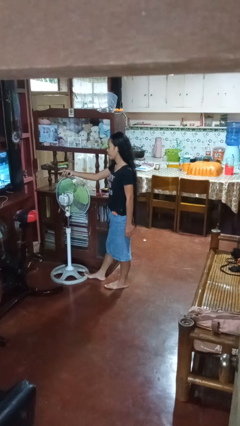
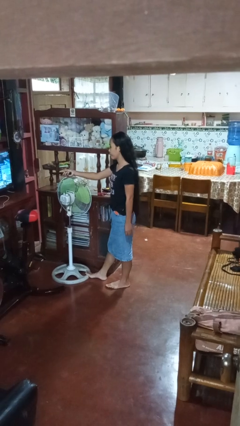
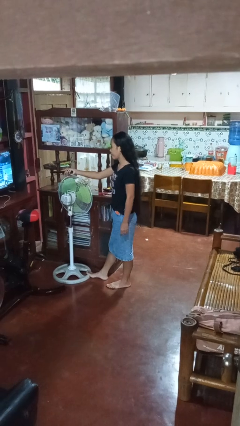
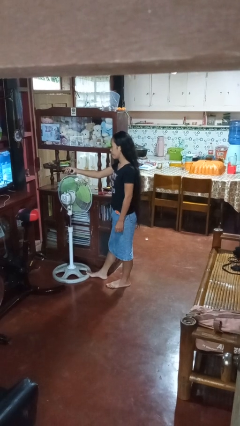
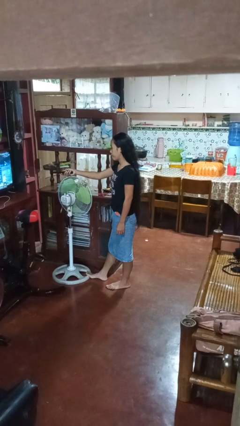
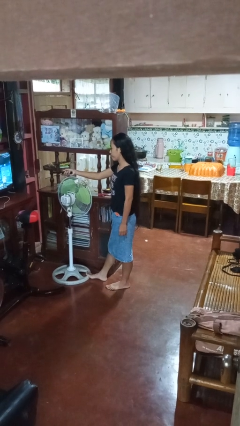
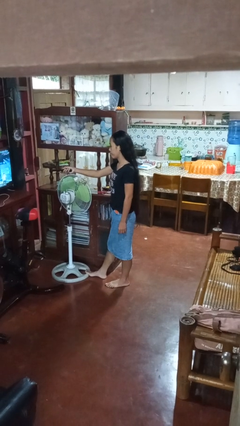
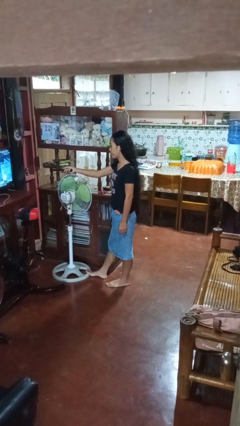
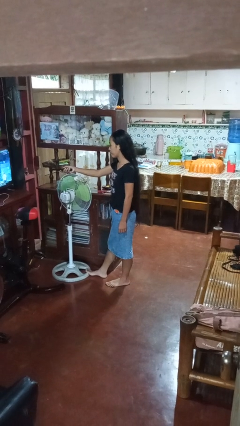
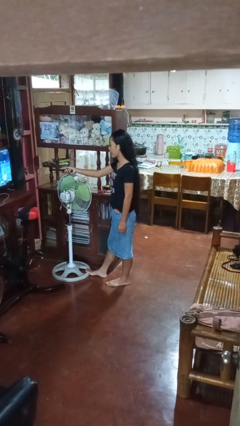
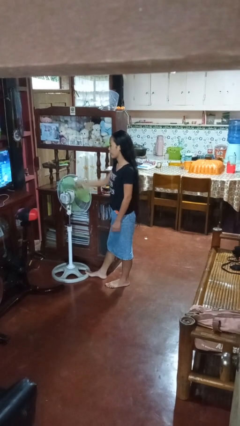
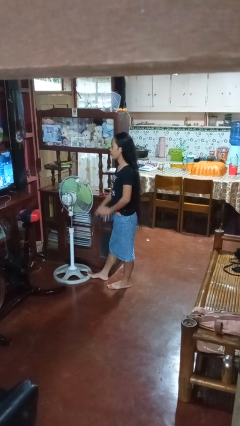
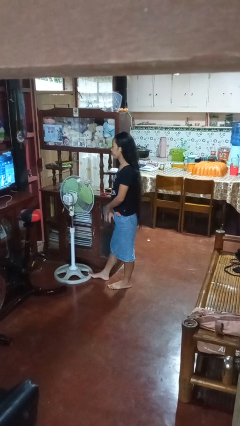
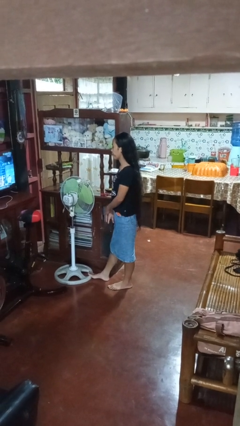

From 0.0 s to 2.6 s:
person uses television remote

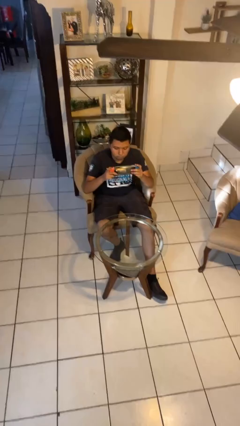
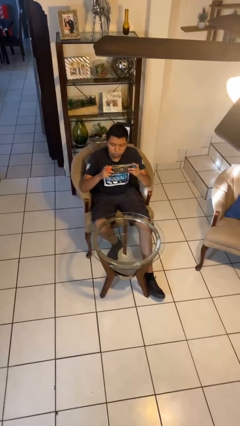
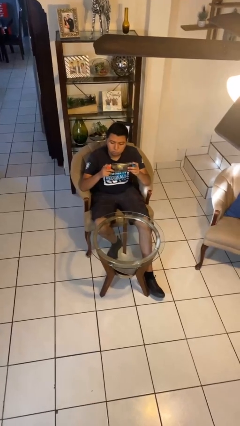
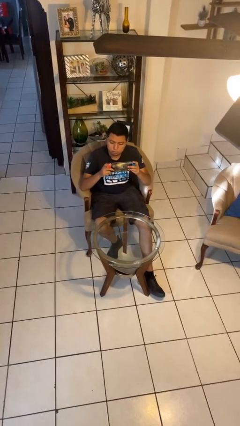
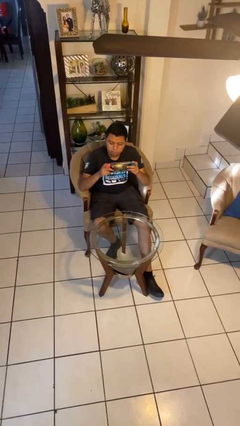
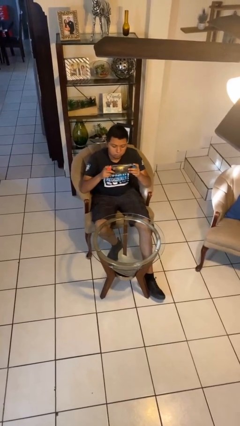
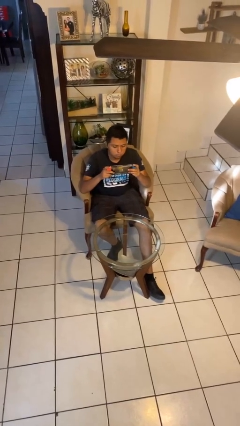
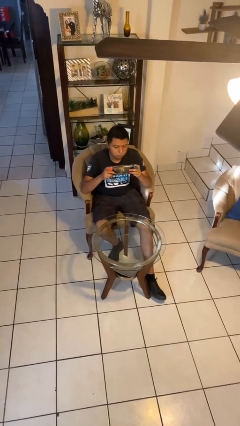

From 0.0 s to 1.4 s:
person interacts with handheld game

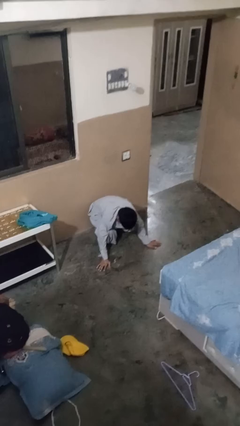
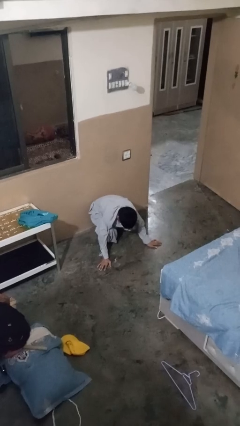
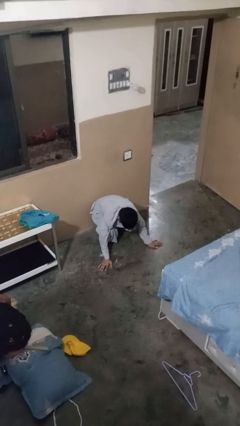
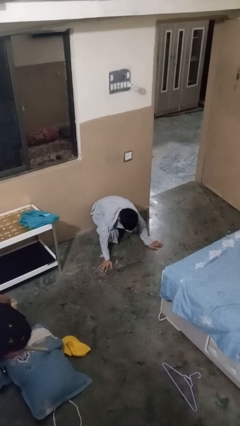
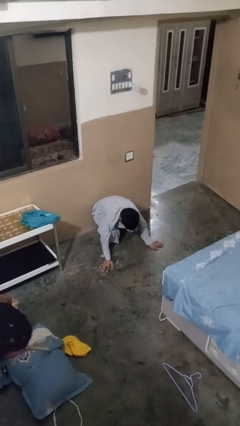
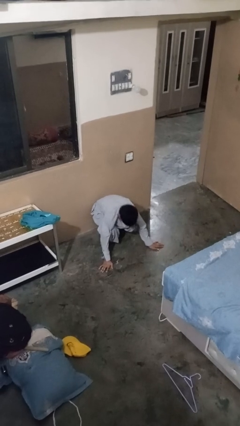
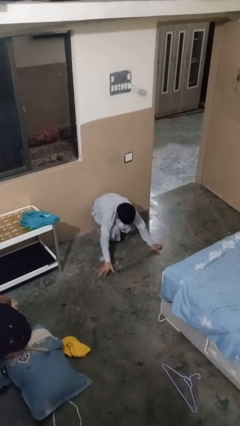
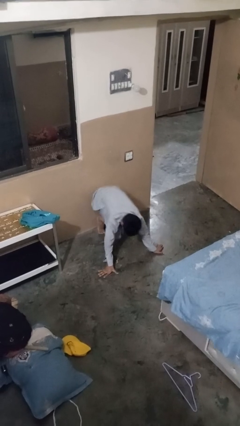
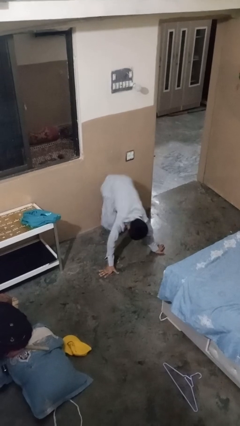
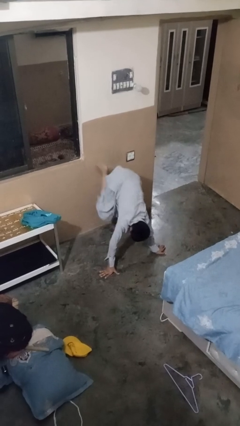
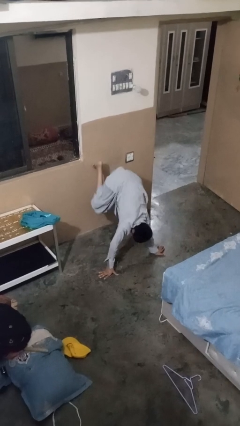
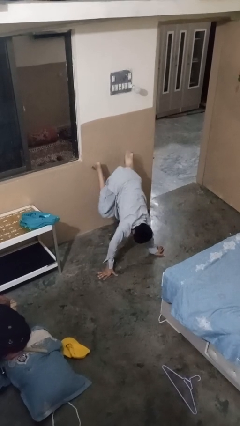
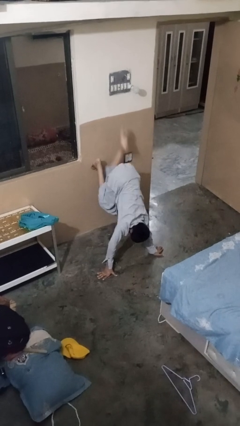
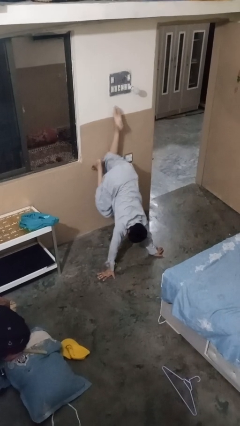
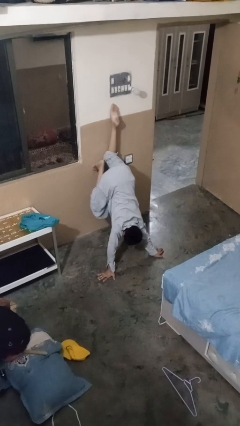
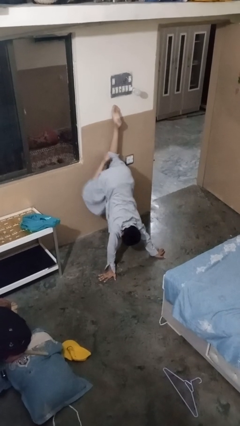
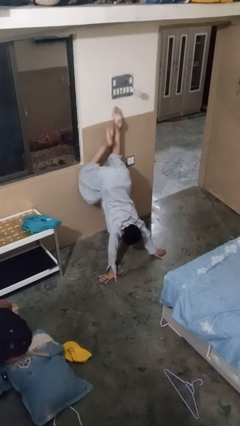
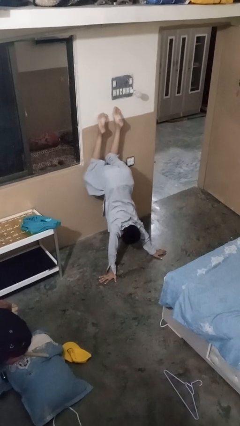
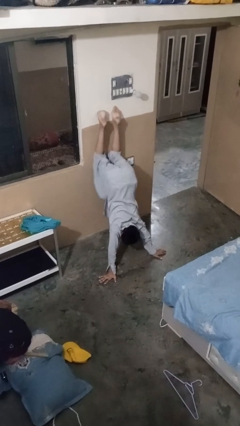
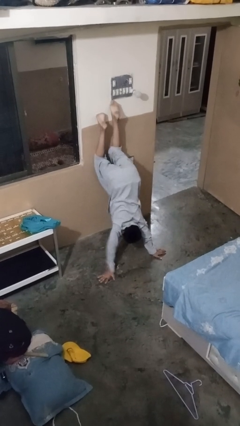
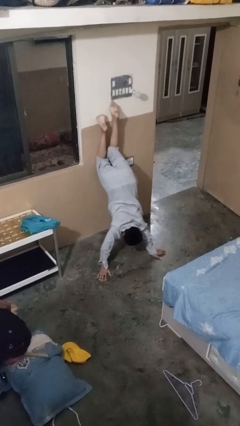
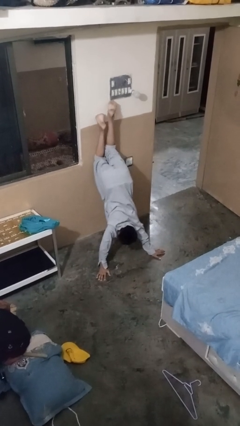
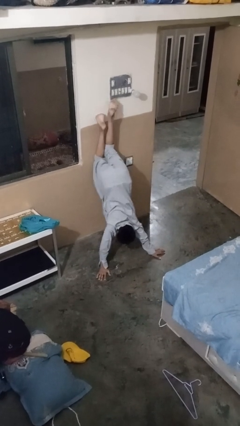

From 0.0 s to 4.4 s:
person handstand

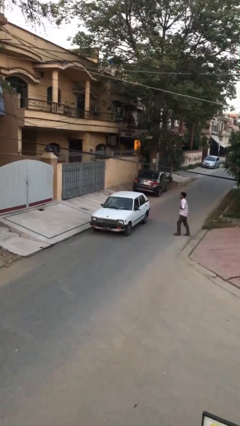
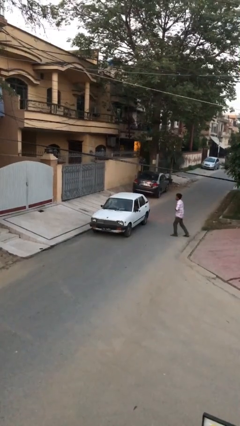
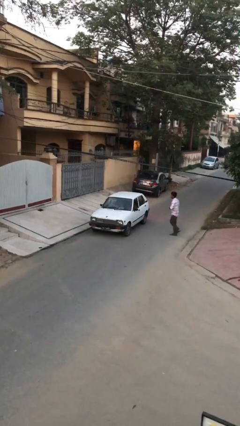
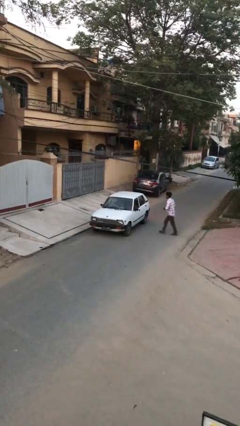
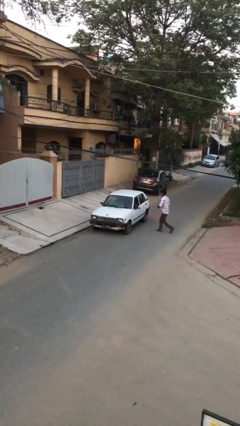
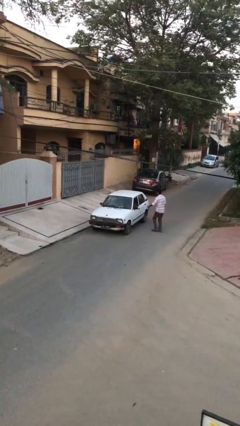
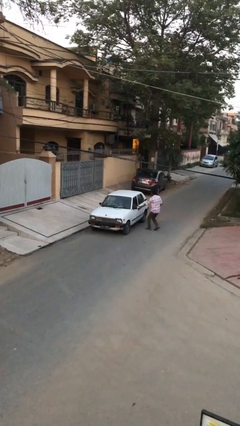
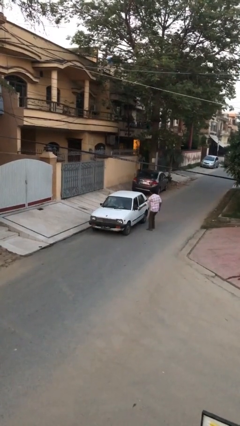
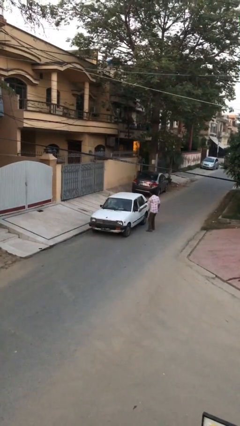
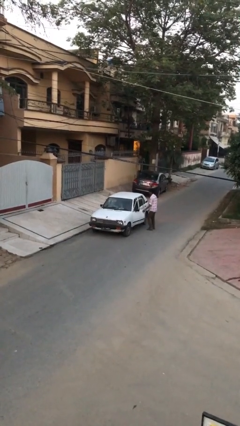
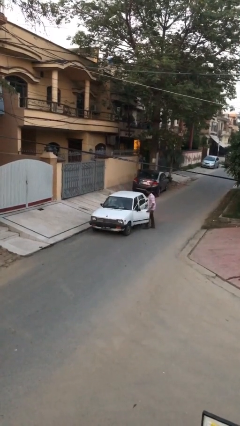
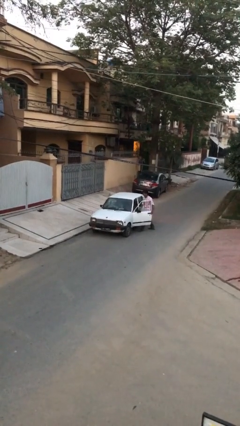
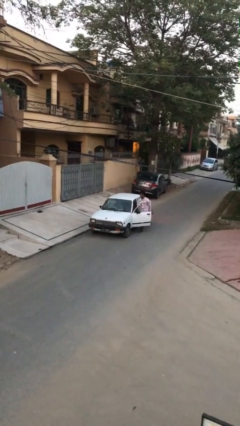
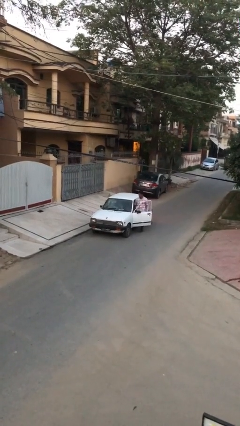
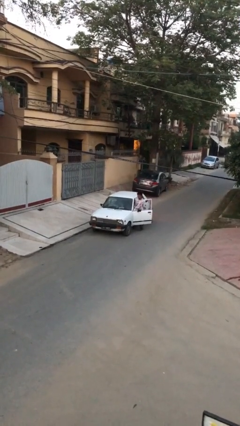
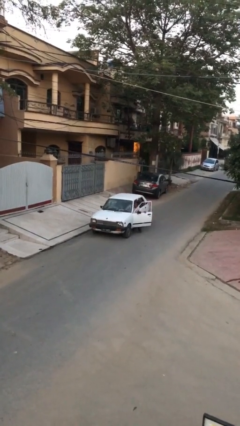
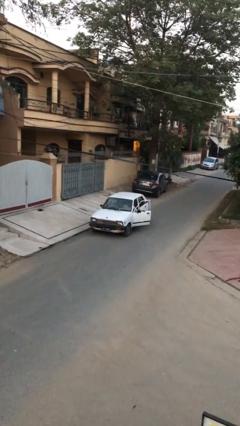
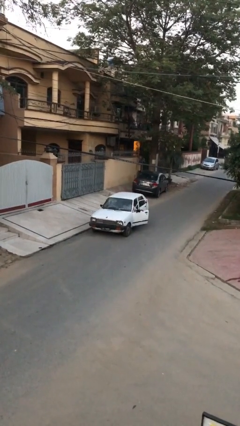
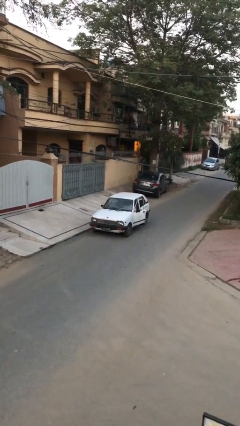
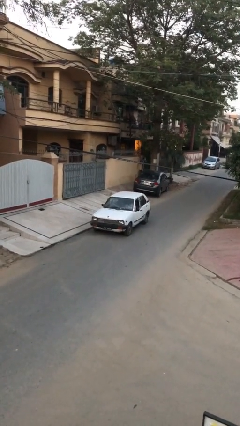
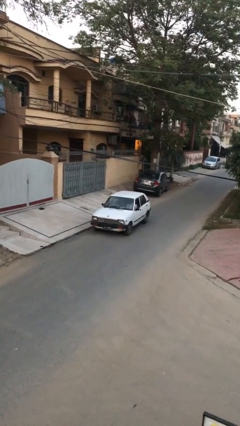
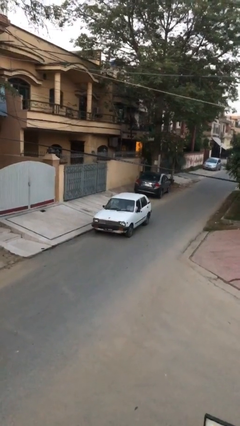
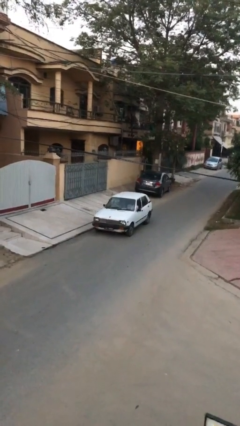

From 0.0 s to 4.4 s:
car picks up person

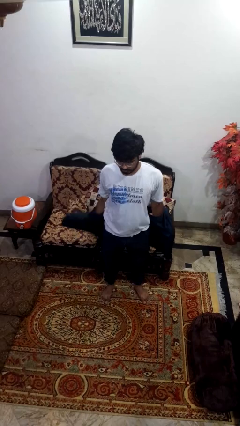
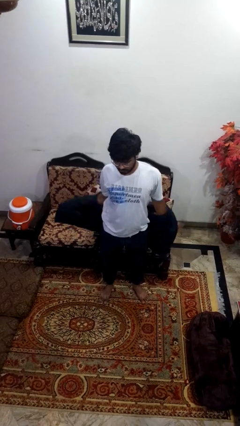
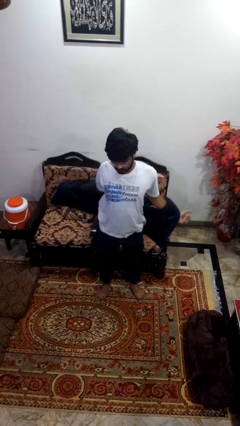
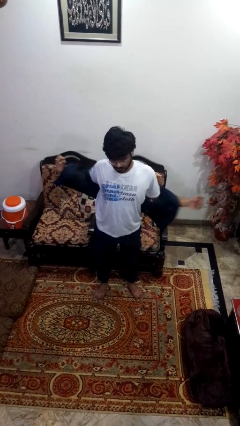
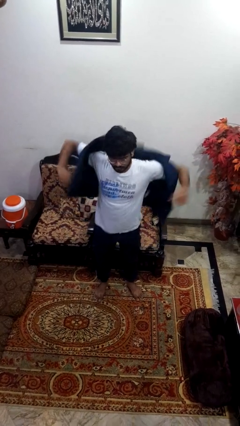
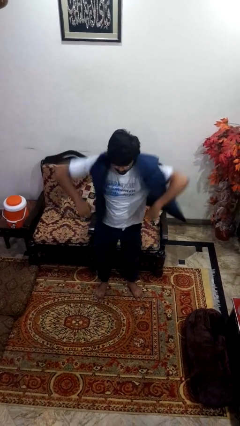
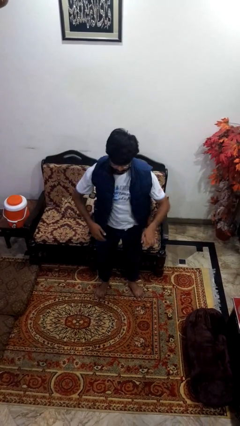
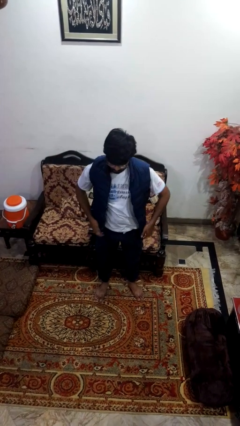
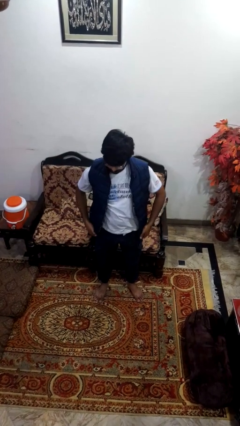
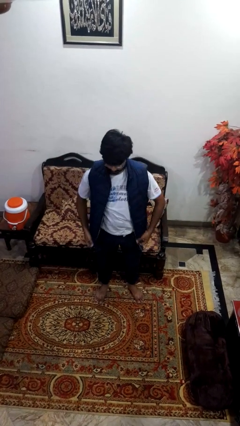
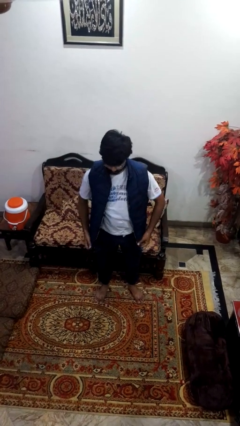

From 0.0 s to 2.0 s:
person puts on jacket

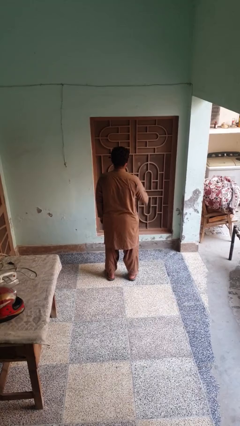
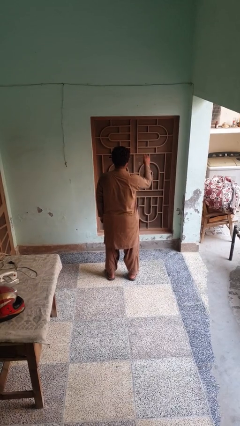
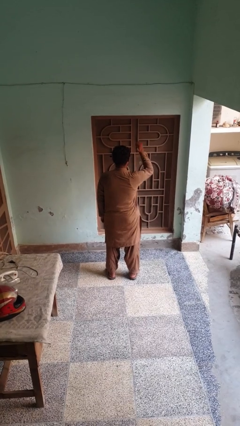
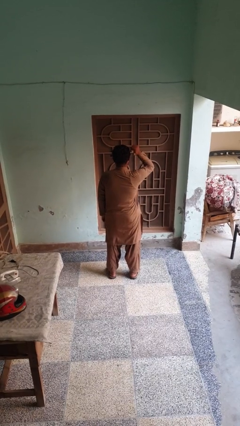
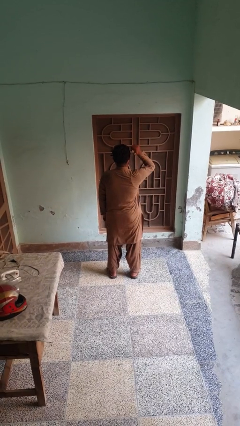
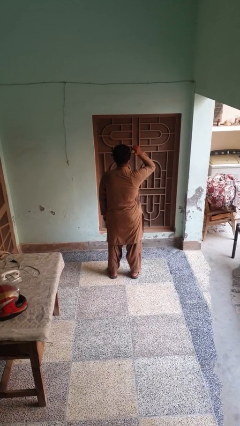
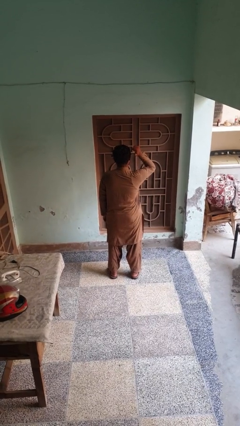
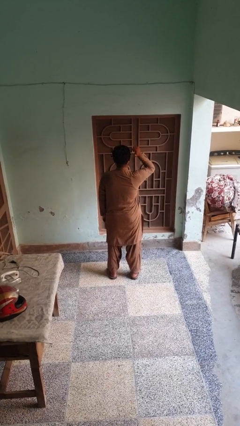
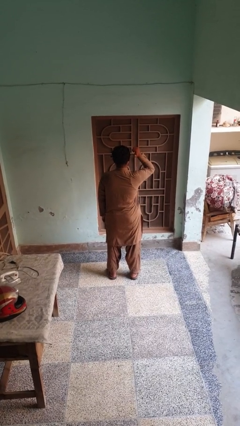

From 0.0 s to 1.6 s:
person gestures behind me

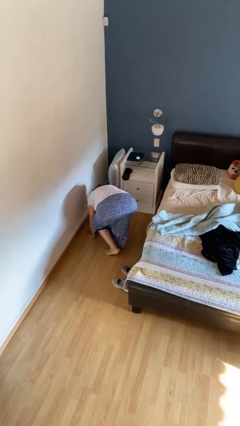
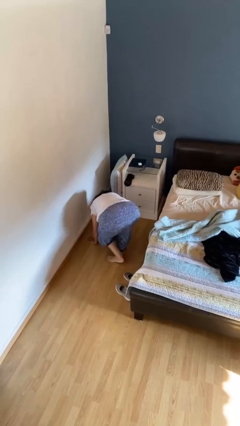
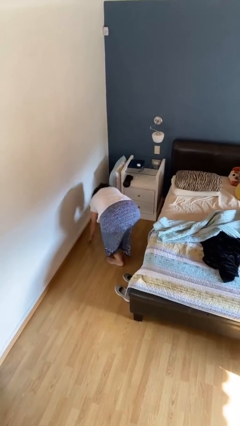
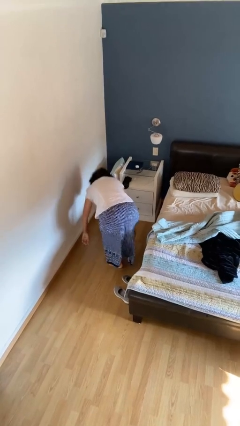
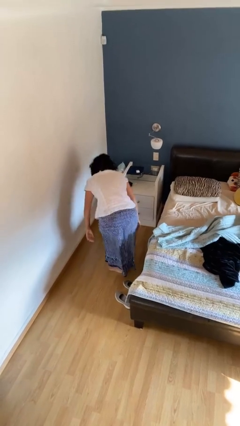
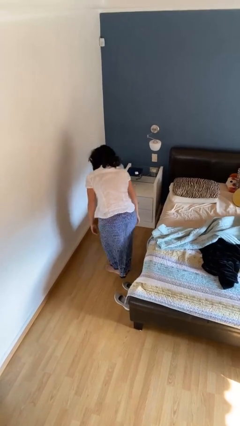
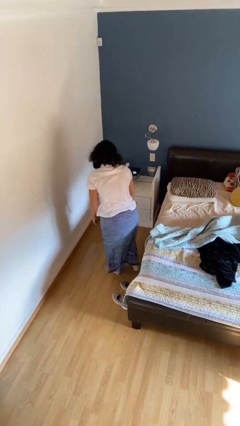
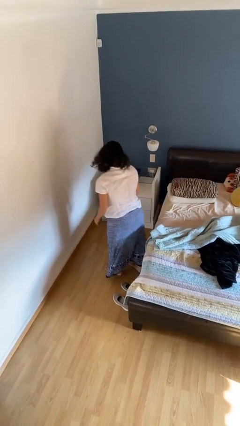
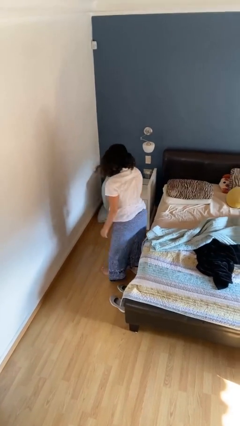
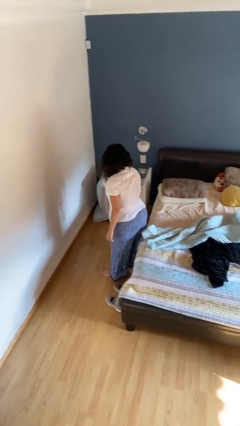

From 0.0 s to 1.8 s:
person stands up from floor
